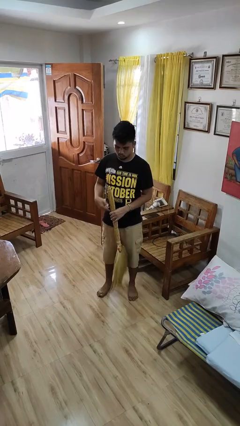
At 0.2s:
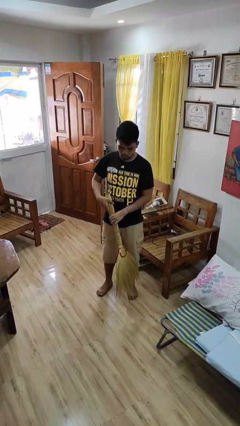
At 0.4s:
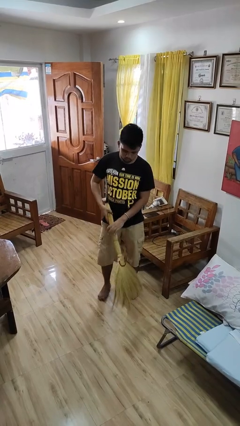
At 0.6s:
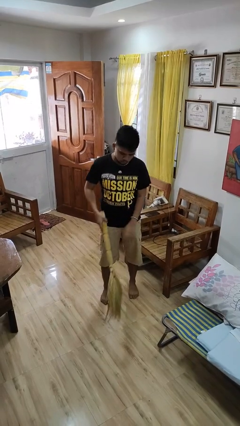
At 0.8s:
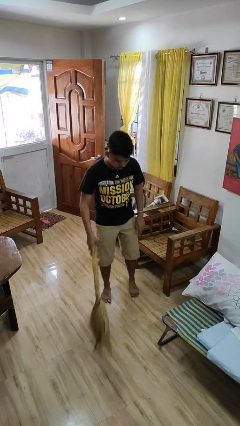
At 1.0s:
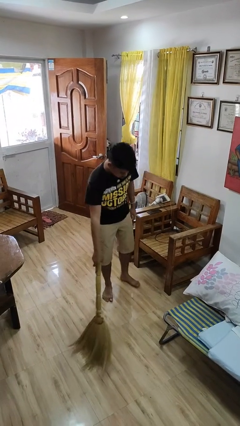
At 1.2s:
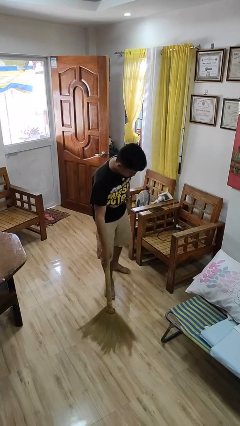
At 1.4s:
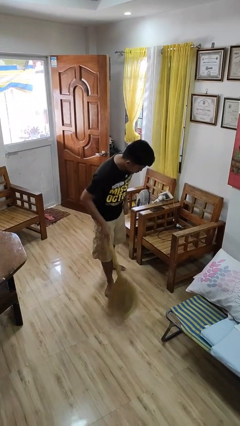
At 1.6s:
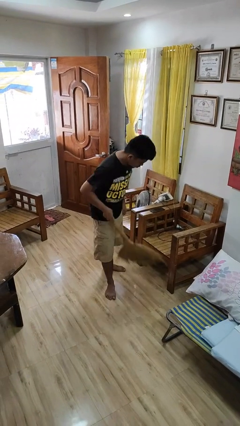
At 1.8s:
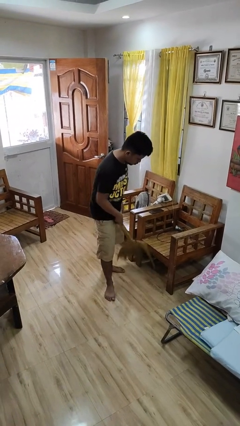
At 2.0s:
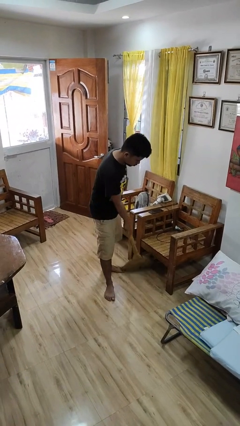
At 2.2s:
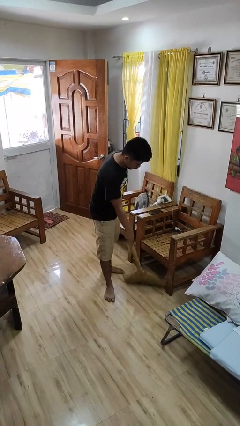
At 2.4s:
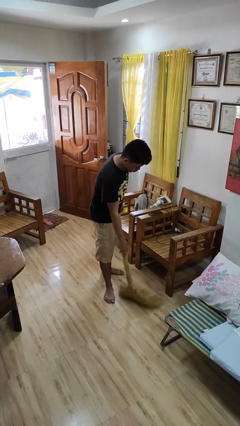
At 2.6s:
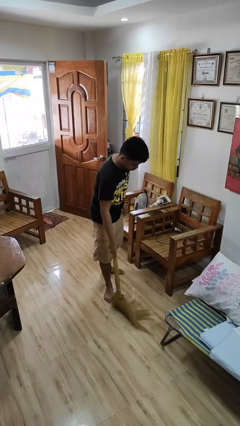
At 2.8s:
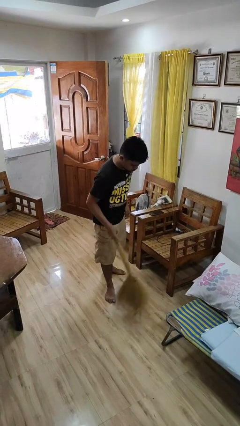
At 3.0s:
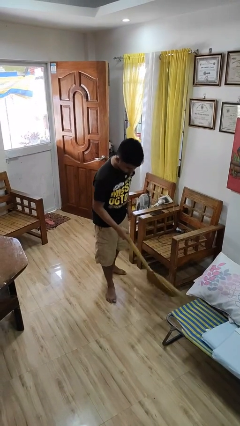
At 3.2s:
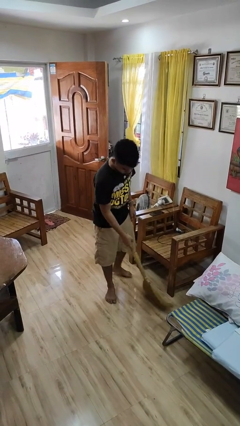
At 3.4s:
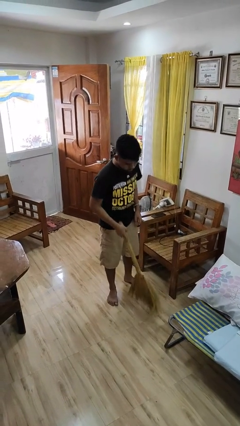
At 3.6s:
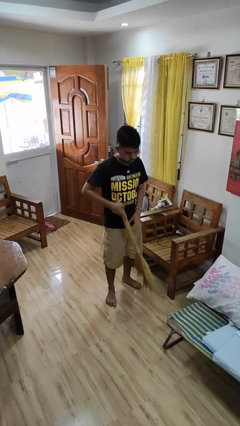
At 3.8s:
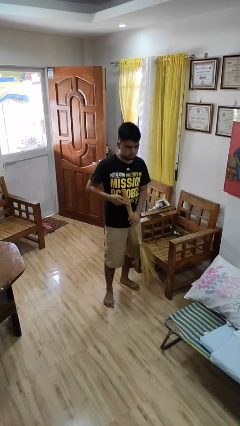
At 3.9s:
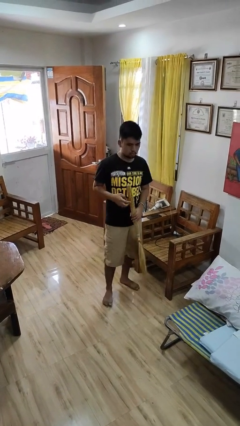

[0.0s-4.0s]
person sweeps floor

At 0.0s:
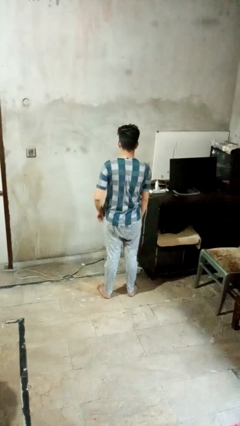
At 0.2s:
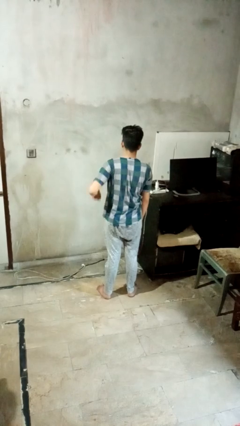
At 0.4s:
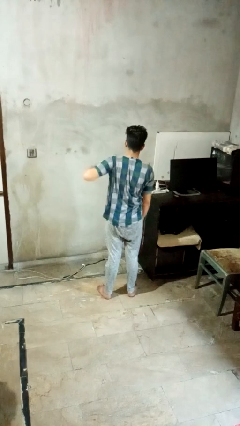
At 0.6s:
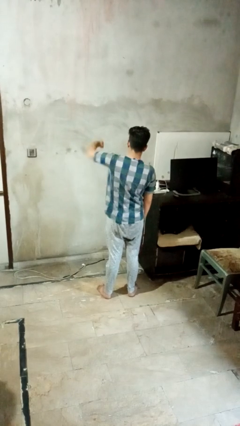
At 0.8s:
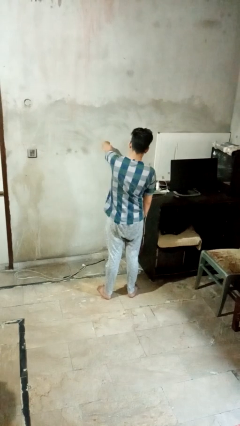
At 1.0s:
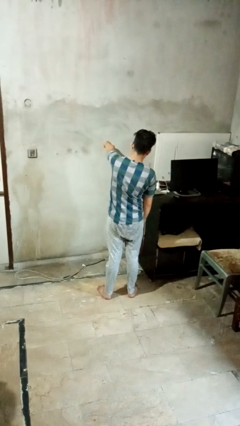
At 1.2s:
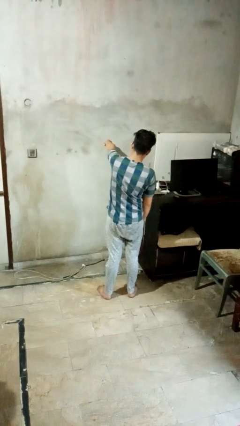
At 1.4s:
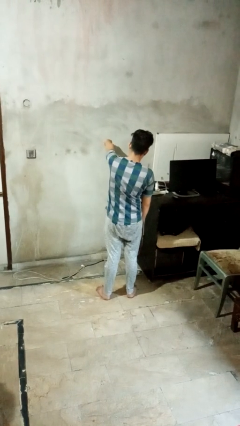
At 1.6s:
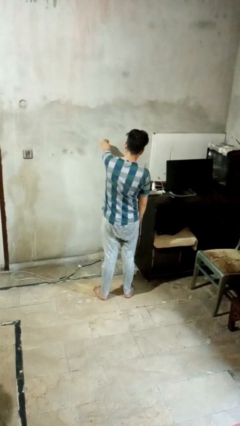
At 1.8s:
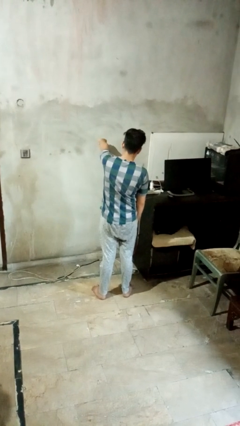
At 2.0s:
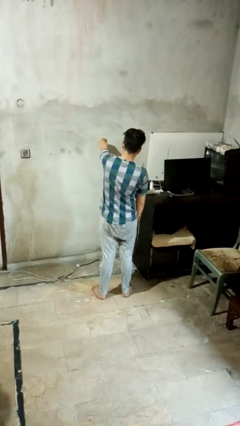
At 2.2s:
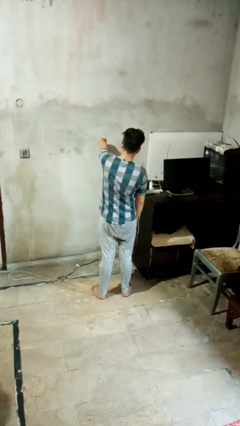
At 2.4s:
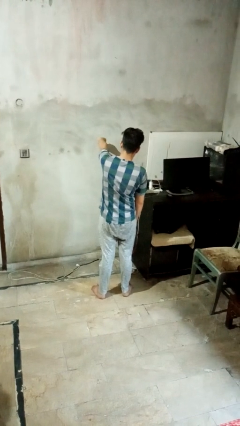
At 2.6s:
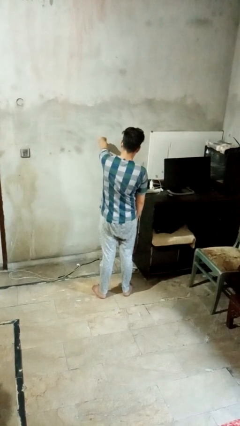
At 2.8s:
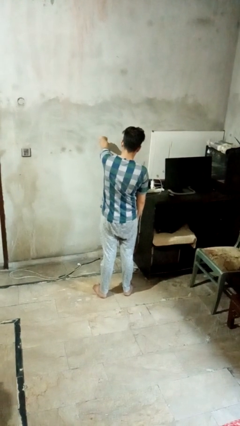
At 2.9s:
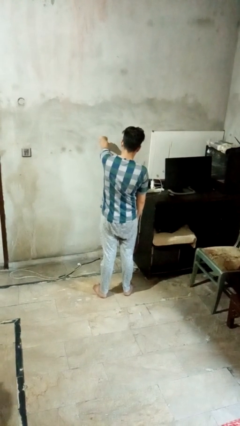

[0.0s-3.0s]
person punches

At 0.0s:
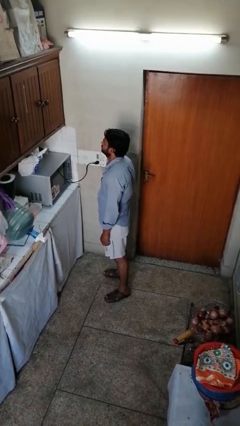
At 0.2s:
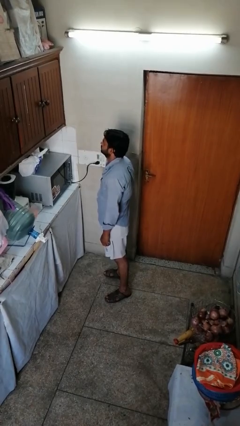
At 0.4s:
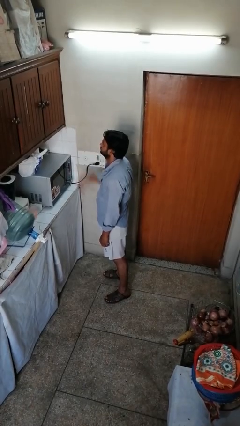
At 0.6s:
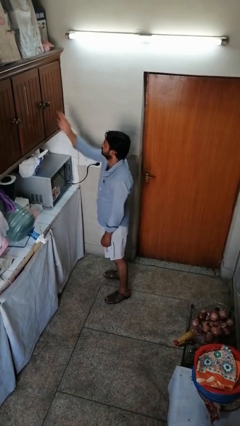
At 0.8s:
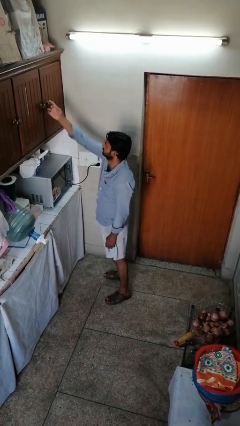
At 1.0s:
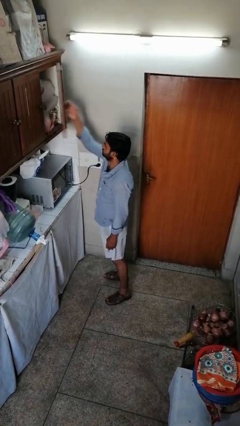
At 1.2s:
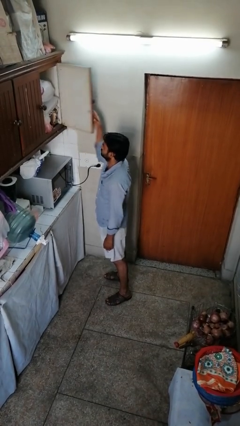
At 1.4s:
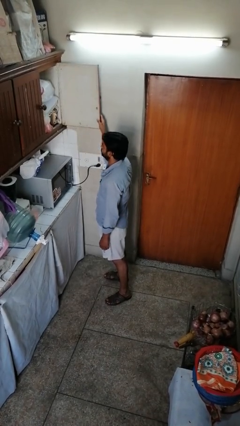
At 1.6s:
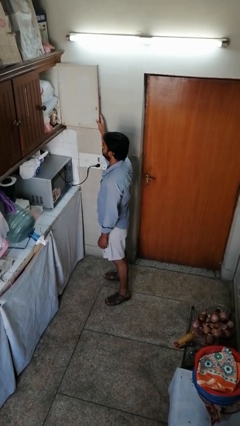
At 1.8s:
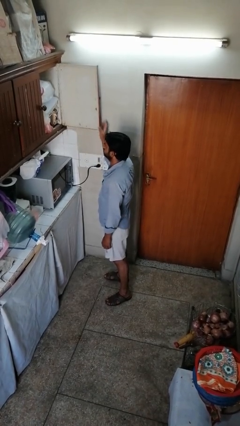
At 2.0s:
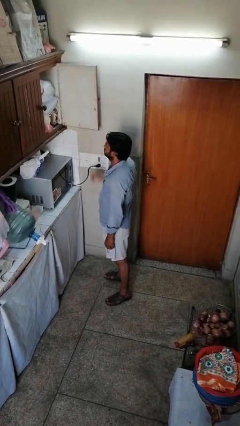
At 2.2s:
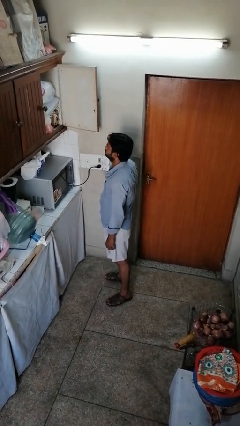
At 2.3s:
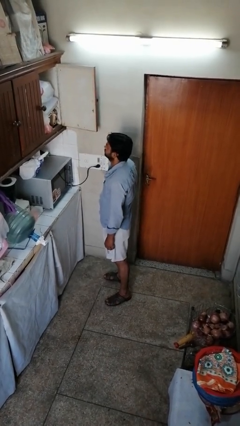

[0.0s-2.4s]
person opens cabinet

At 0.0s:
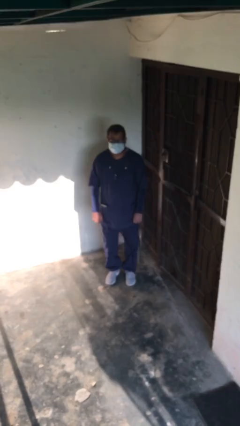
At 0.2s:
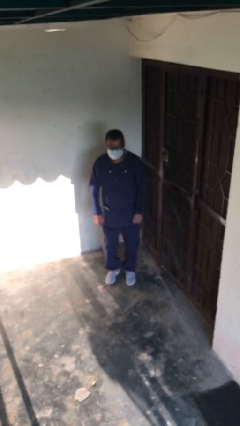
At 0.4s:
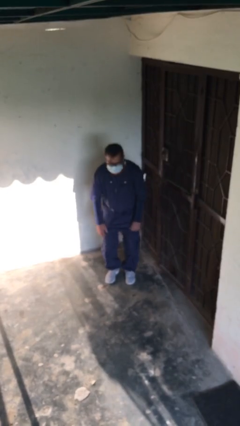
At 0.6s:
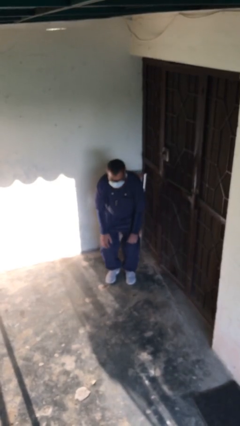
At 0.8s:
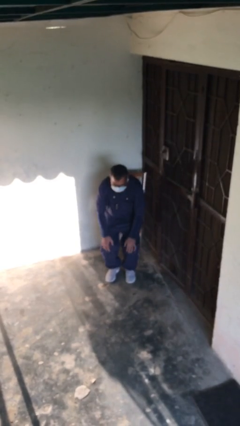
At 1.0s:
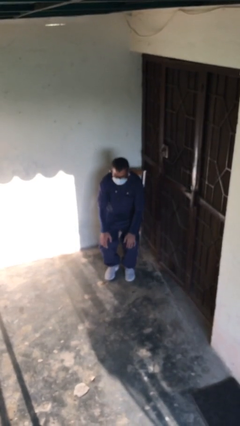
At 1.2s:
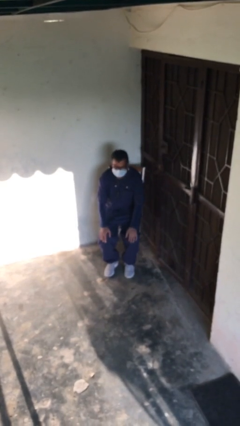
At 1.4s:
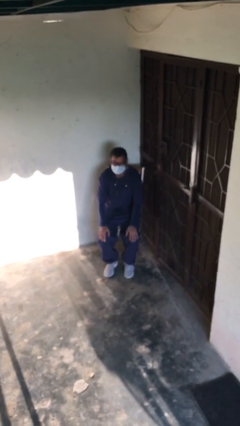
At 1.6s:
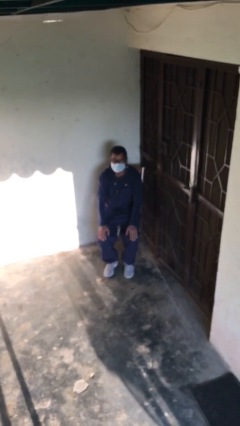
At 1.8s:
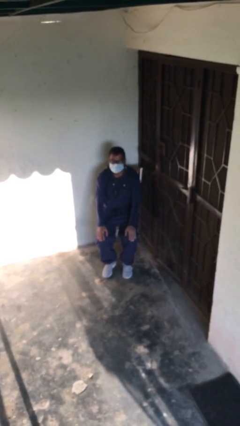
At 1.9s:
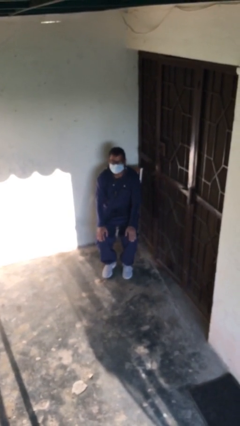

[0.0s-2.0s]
person sits down

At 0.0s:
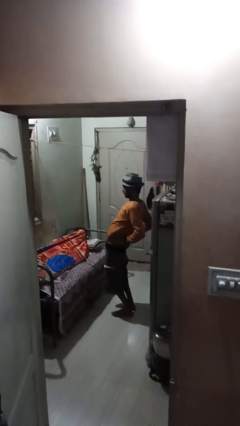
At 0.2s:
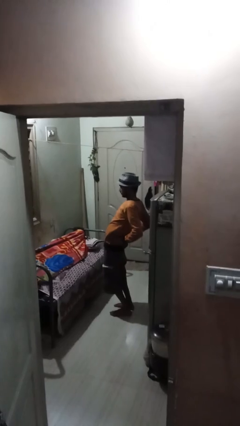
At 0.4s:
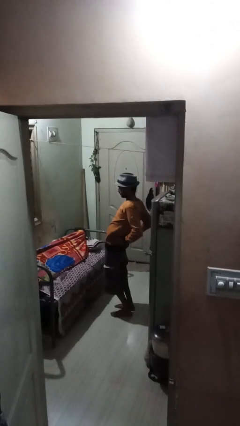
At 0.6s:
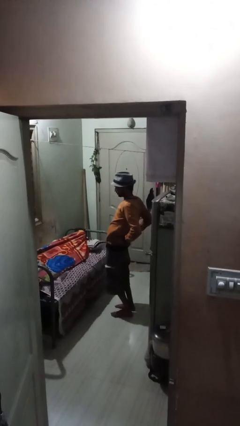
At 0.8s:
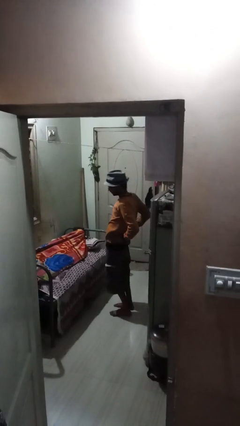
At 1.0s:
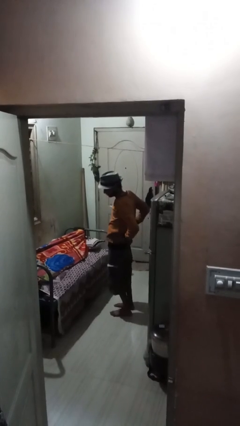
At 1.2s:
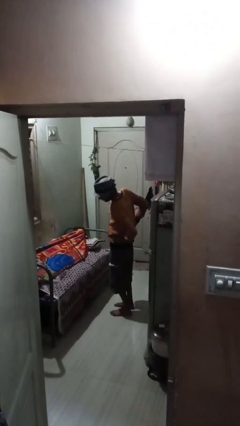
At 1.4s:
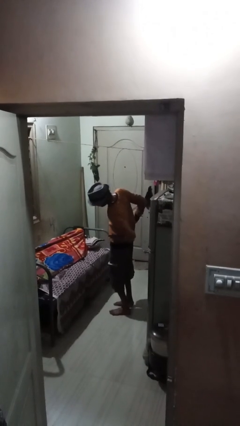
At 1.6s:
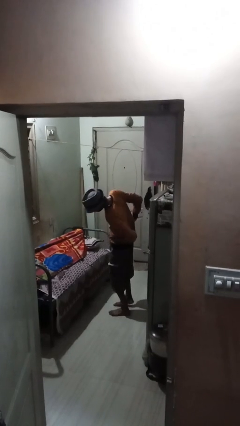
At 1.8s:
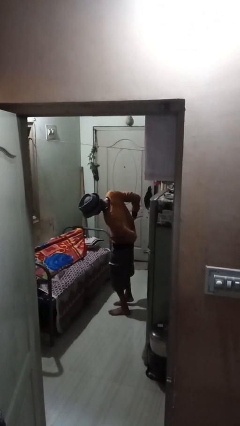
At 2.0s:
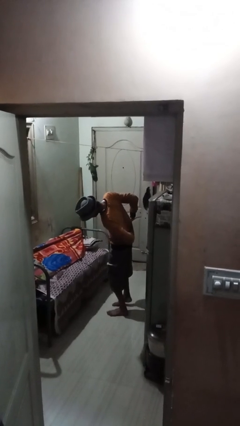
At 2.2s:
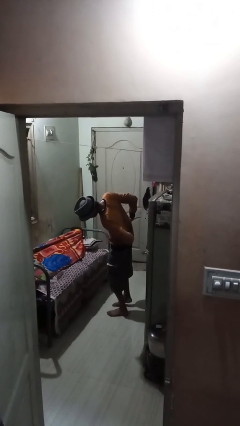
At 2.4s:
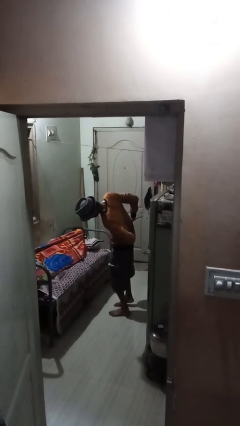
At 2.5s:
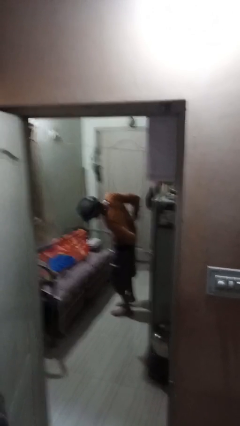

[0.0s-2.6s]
person stretches arms to side

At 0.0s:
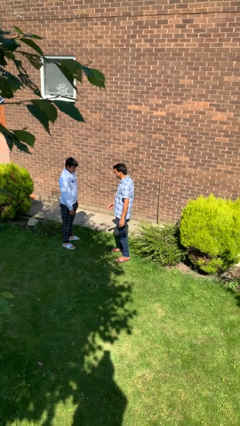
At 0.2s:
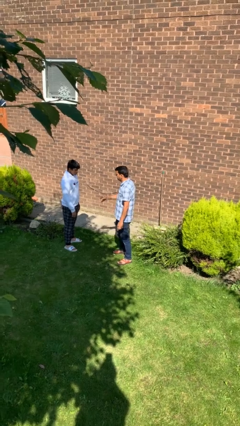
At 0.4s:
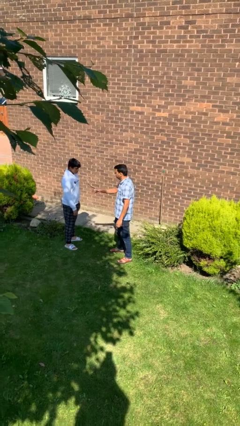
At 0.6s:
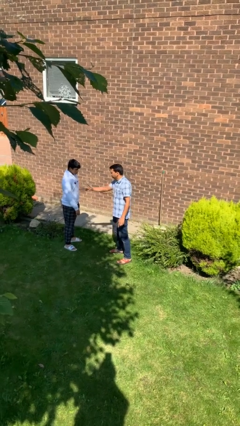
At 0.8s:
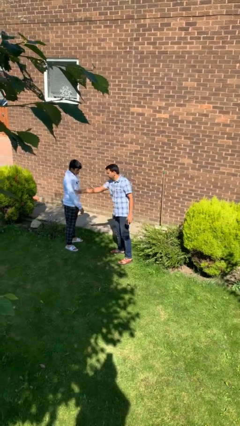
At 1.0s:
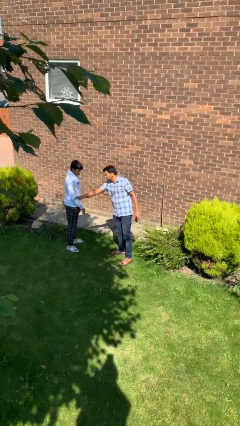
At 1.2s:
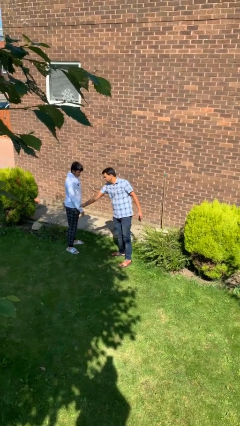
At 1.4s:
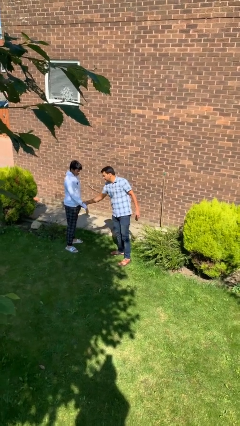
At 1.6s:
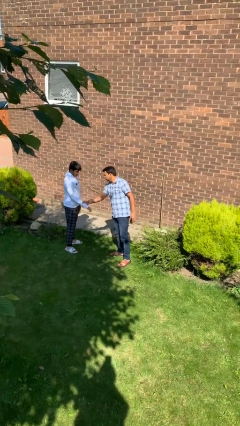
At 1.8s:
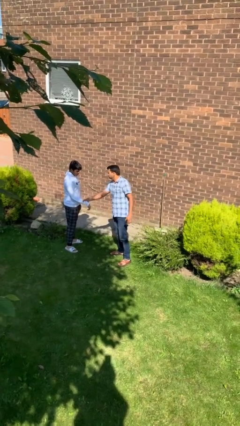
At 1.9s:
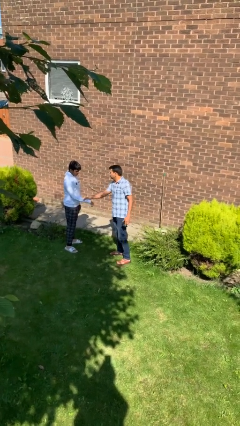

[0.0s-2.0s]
person grabs person by forearm

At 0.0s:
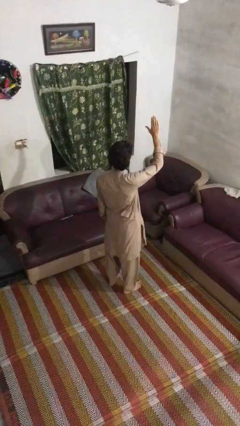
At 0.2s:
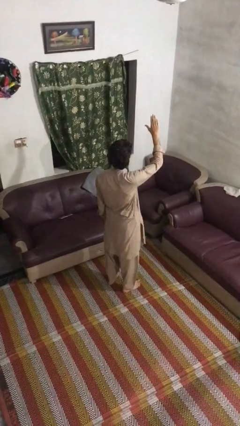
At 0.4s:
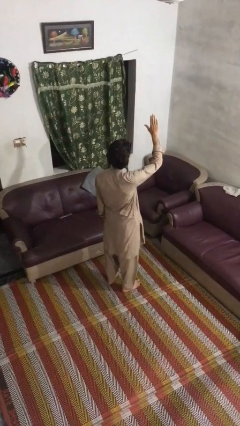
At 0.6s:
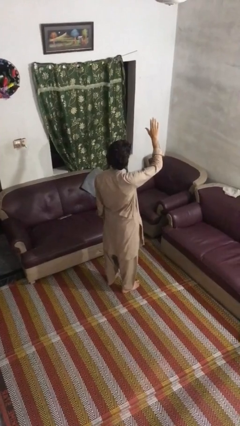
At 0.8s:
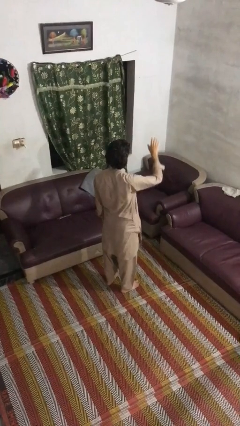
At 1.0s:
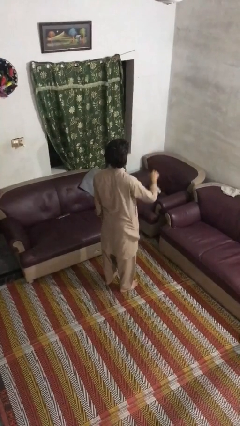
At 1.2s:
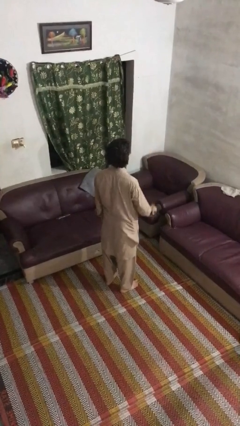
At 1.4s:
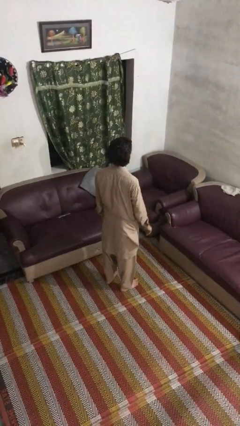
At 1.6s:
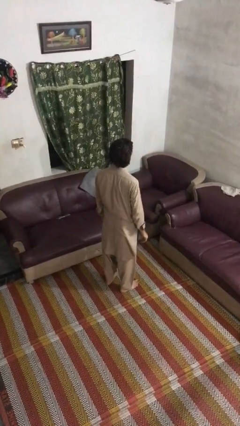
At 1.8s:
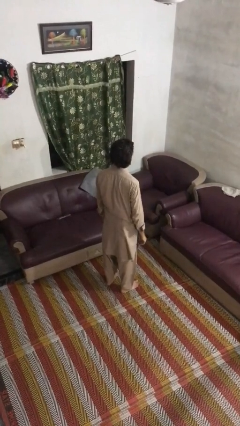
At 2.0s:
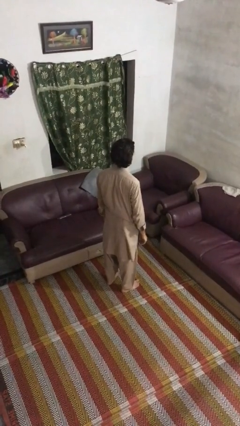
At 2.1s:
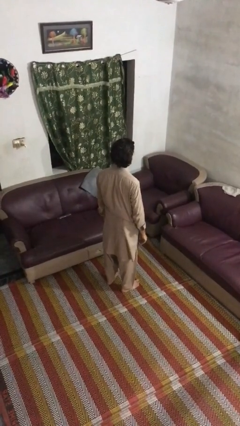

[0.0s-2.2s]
person gestures lower hand
